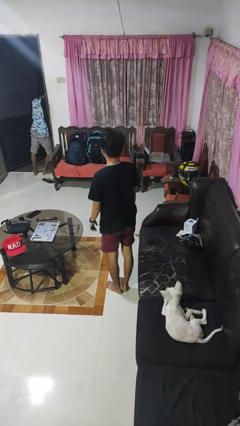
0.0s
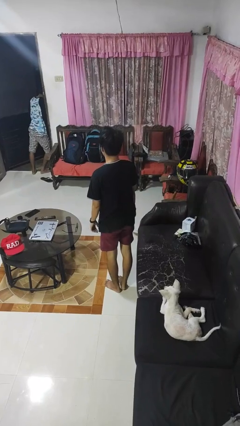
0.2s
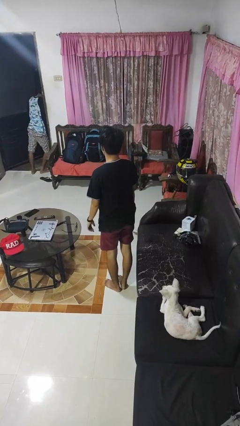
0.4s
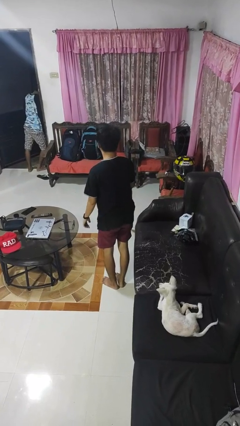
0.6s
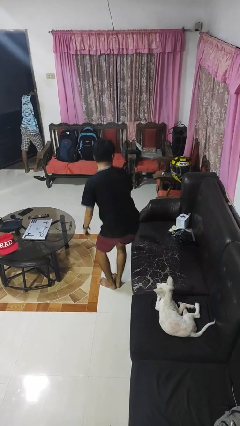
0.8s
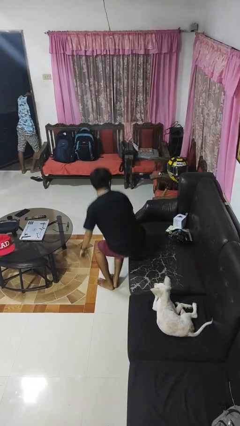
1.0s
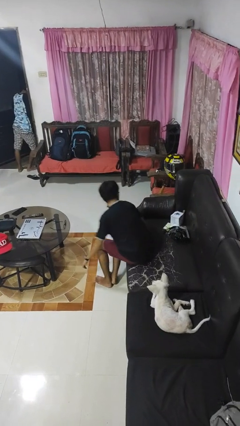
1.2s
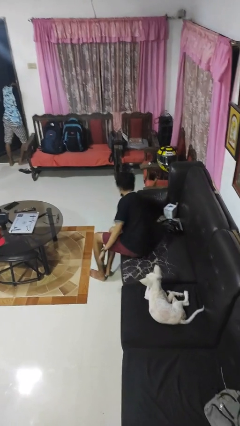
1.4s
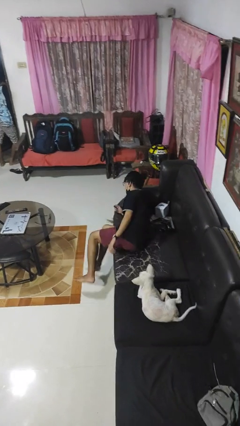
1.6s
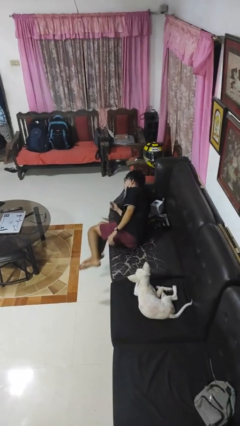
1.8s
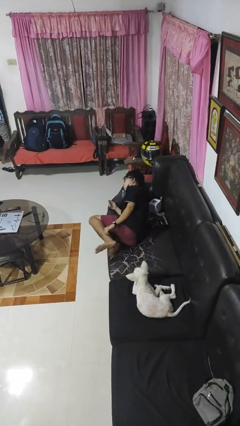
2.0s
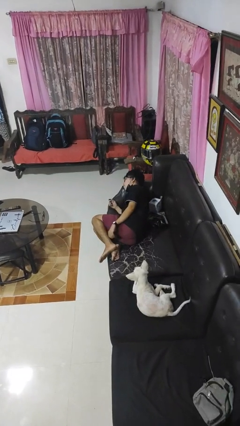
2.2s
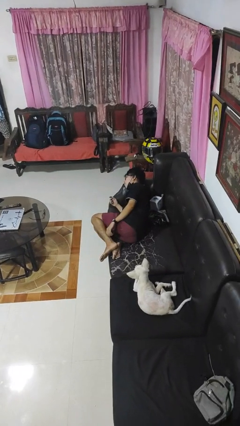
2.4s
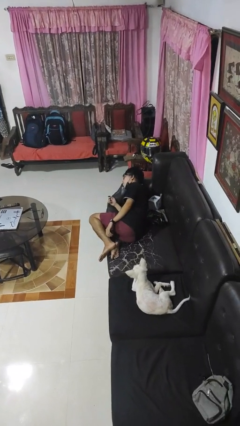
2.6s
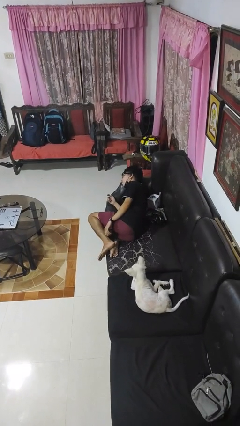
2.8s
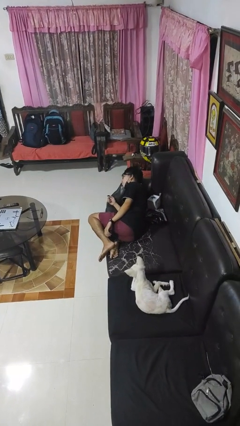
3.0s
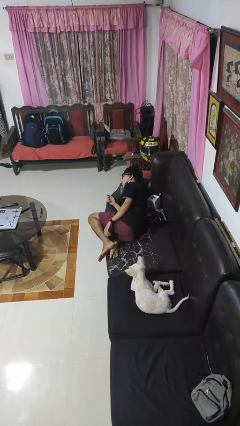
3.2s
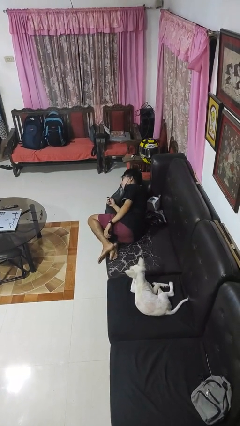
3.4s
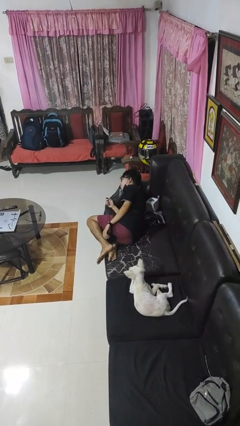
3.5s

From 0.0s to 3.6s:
person lies down on couch

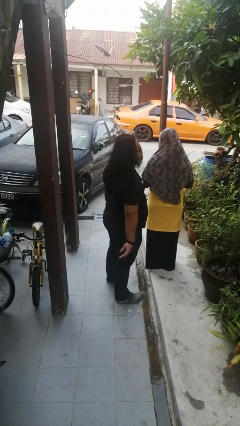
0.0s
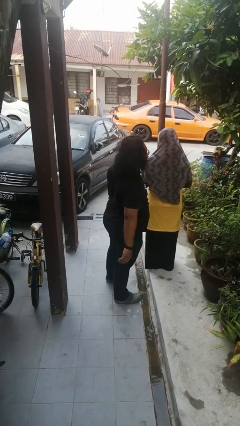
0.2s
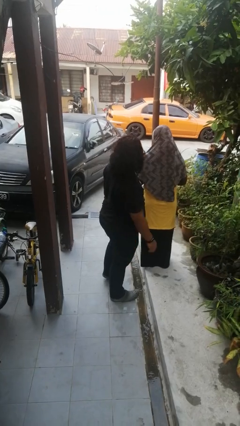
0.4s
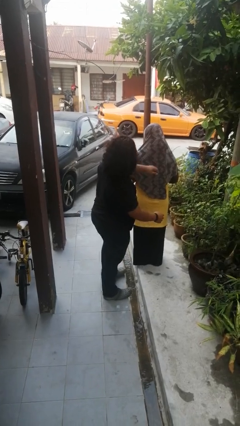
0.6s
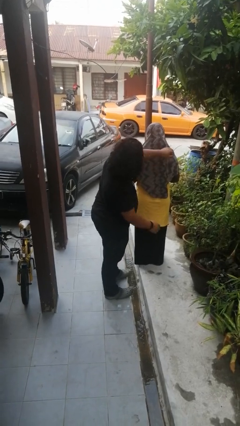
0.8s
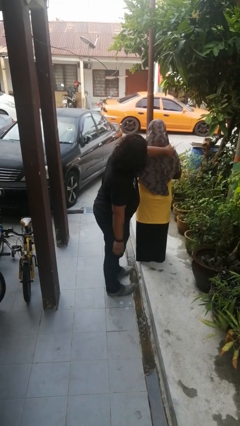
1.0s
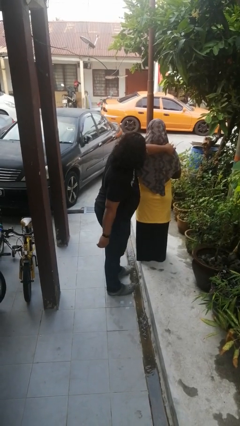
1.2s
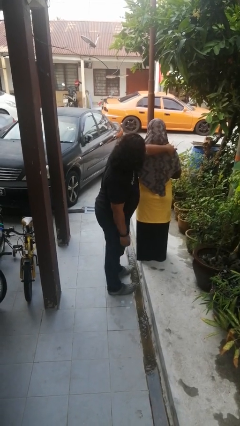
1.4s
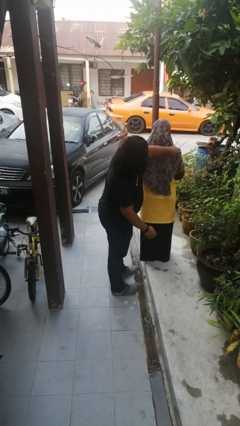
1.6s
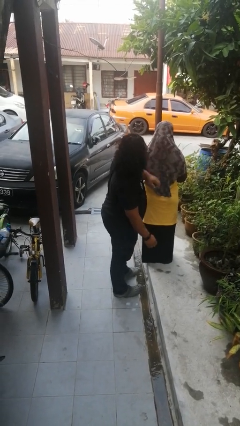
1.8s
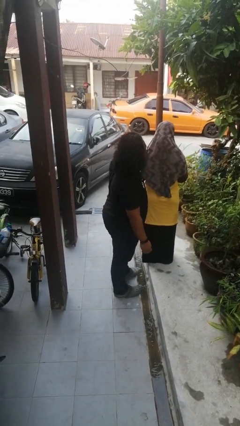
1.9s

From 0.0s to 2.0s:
person touches back of person

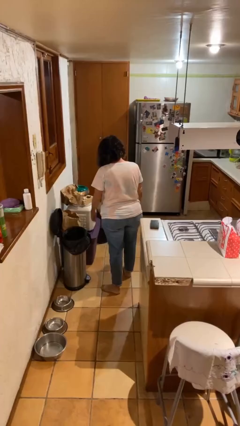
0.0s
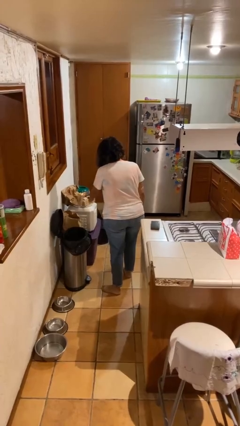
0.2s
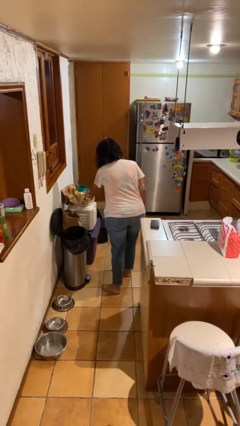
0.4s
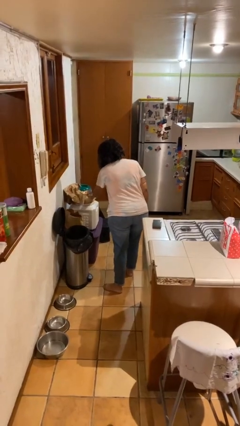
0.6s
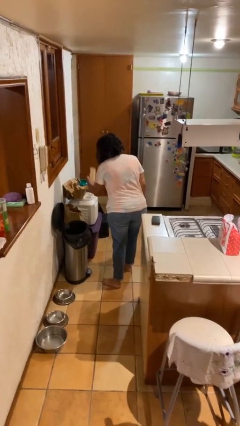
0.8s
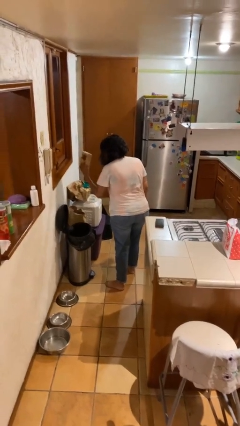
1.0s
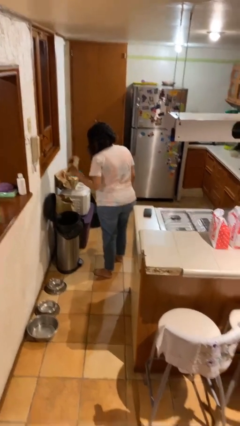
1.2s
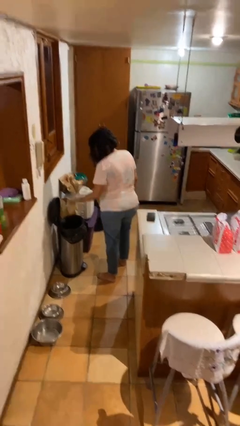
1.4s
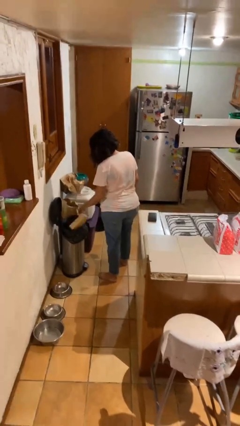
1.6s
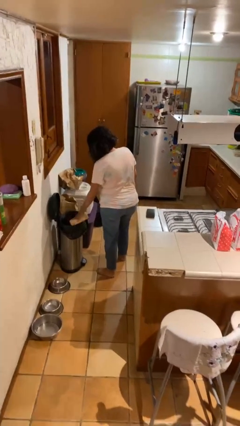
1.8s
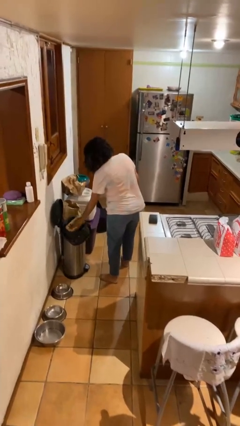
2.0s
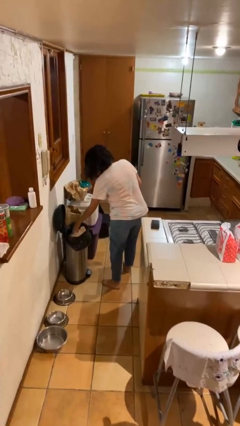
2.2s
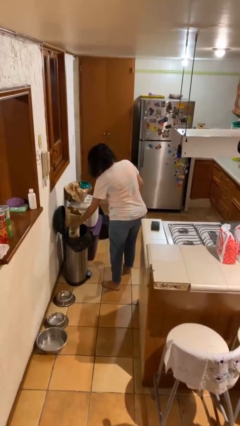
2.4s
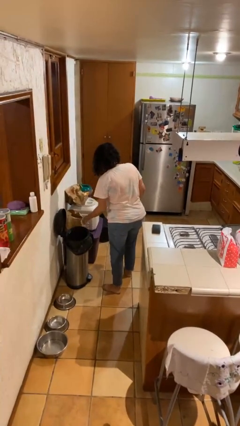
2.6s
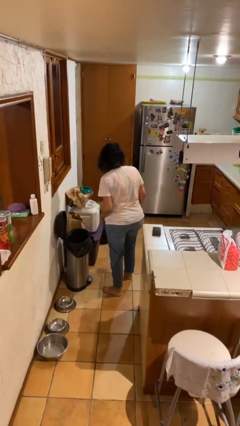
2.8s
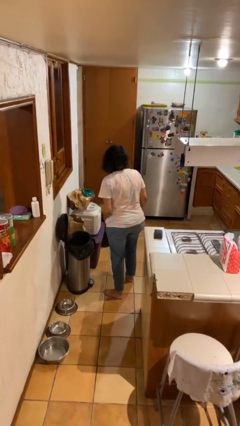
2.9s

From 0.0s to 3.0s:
person discards trash

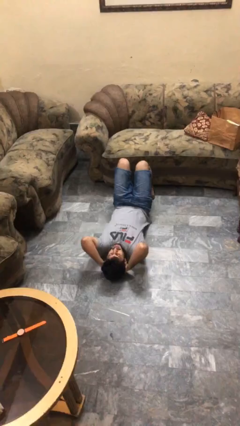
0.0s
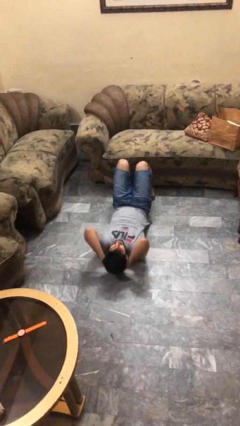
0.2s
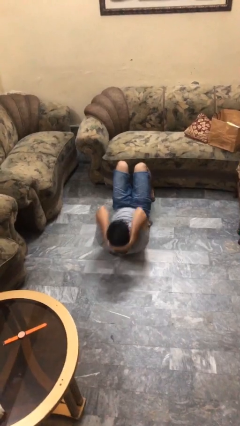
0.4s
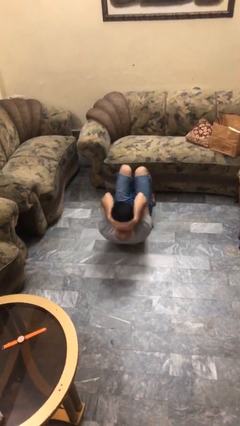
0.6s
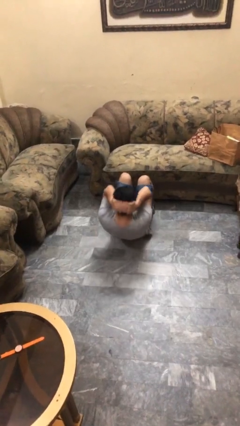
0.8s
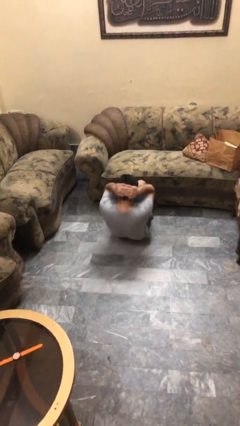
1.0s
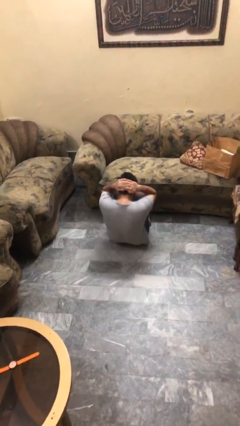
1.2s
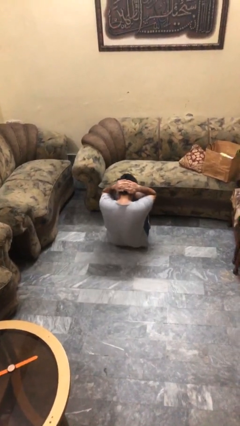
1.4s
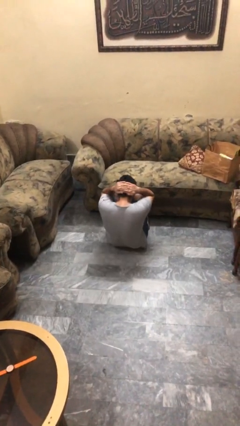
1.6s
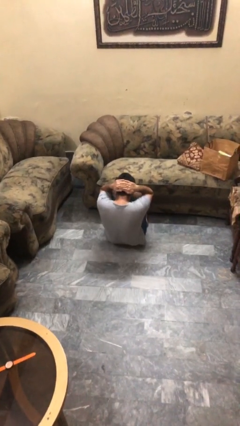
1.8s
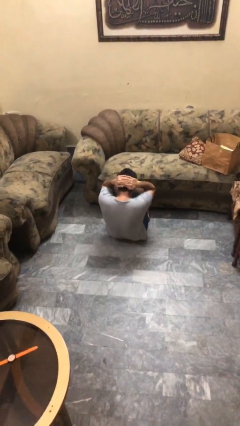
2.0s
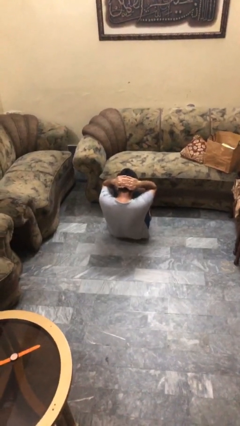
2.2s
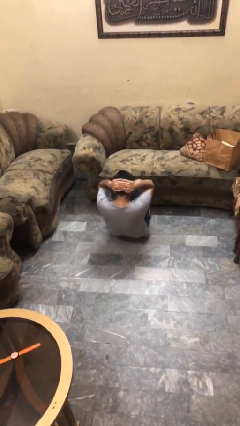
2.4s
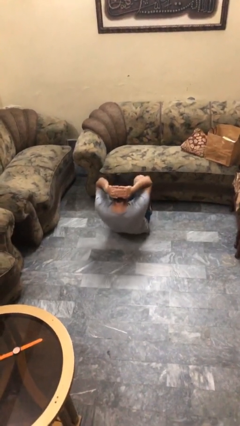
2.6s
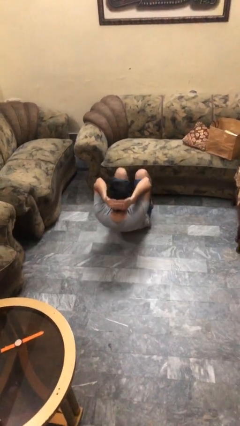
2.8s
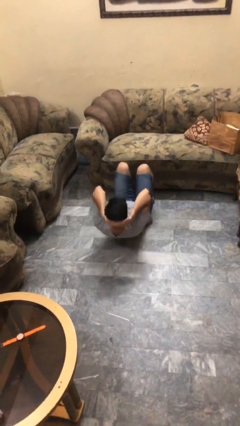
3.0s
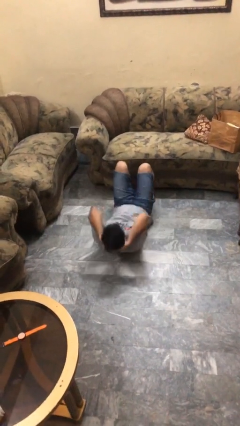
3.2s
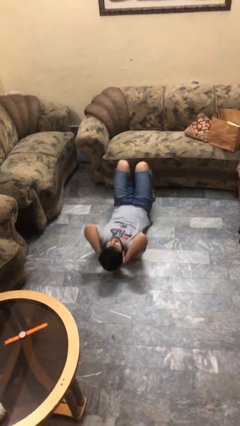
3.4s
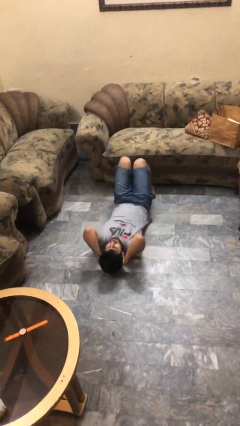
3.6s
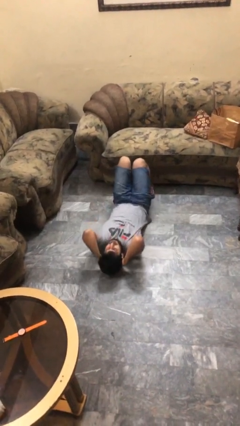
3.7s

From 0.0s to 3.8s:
person exercises with situp

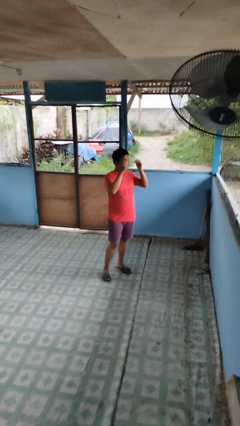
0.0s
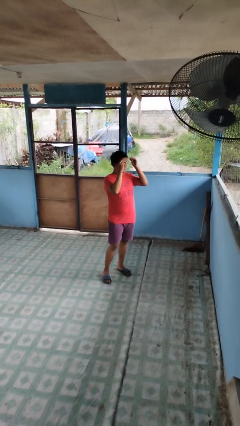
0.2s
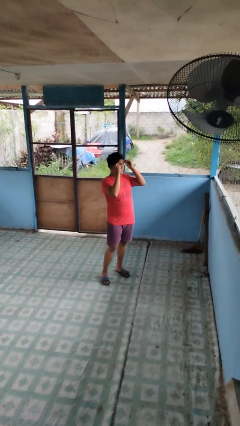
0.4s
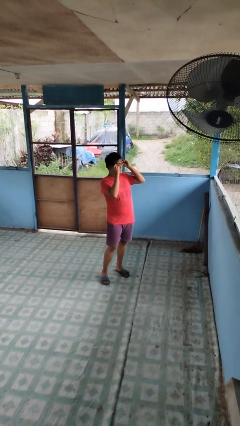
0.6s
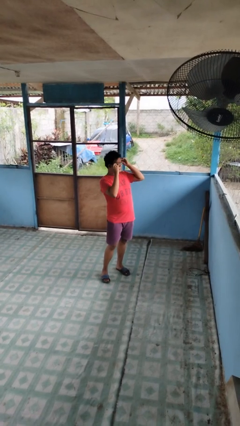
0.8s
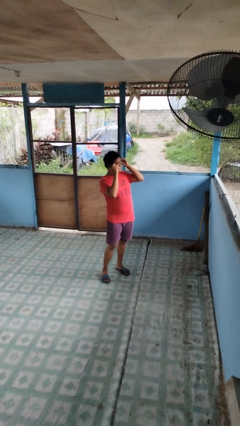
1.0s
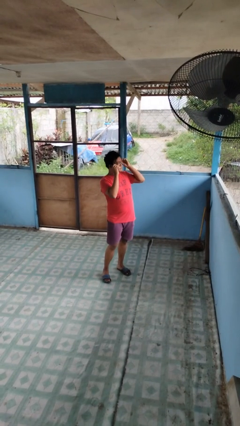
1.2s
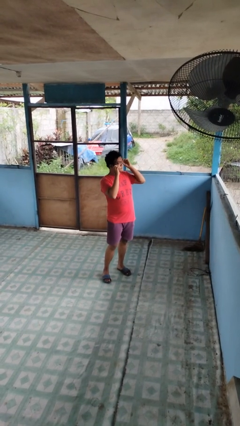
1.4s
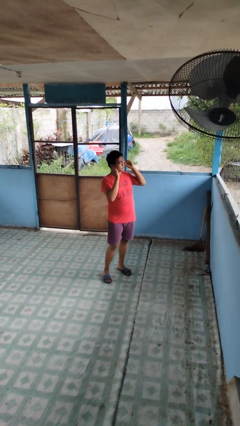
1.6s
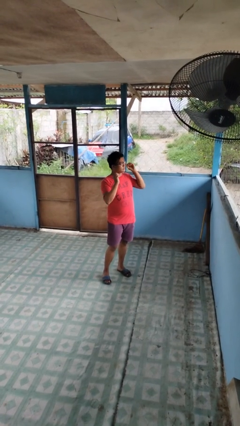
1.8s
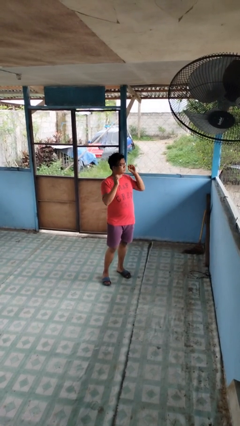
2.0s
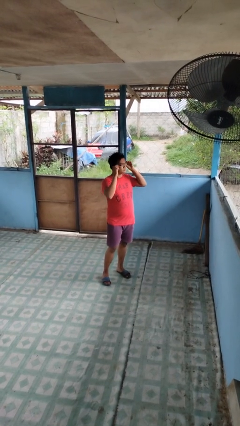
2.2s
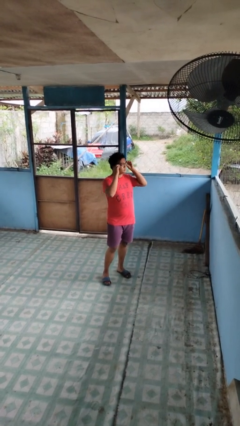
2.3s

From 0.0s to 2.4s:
person puts on glasses

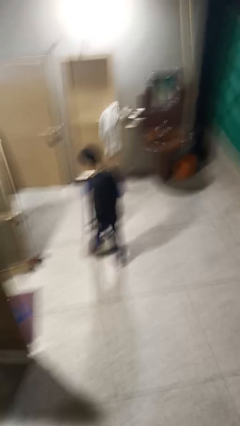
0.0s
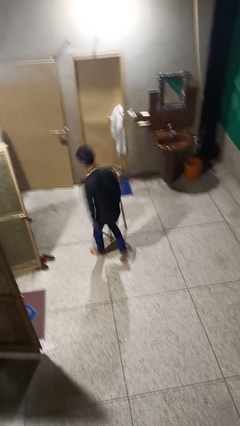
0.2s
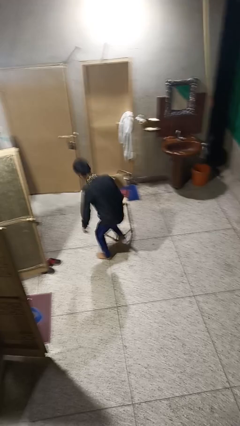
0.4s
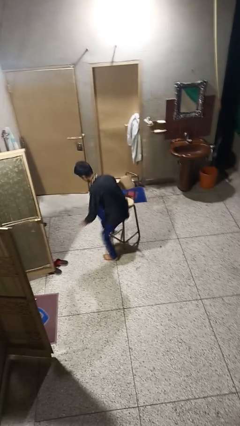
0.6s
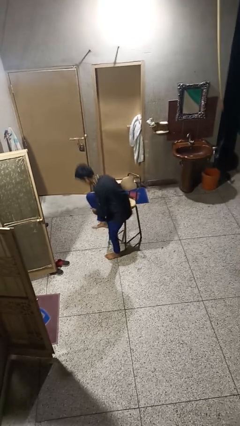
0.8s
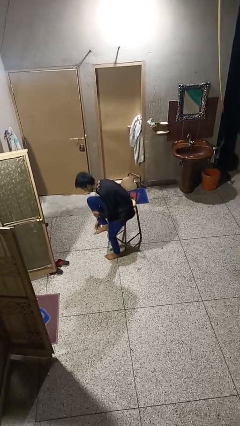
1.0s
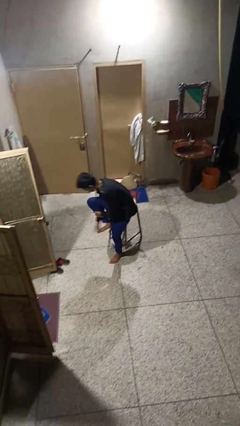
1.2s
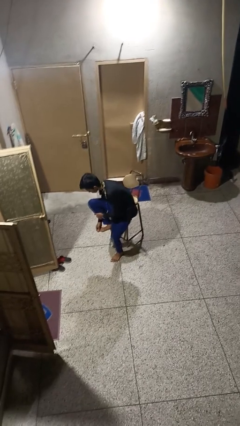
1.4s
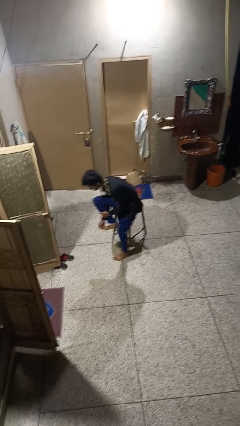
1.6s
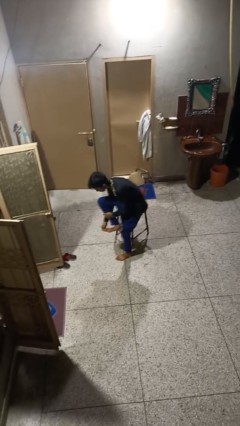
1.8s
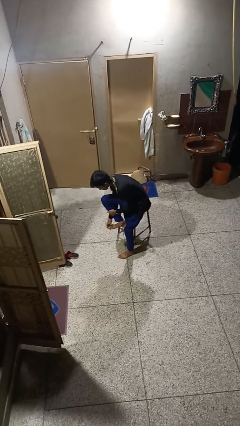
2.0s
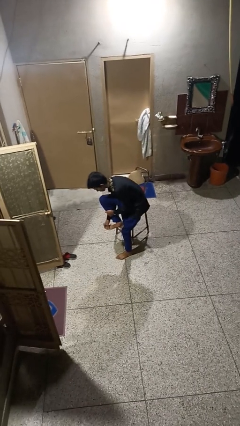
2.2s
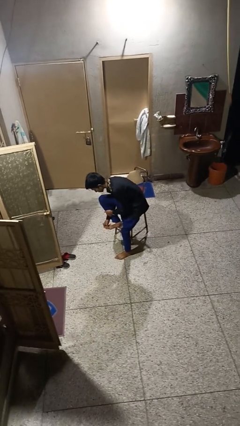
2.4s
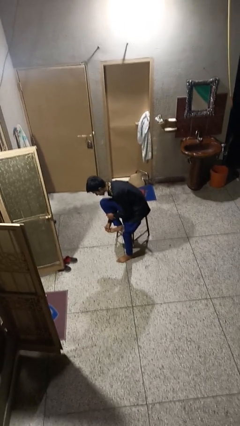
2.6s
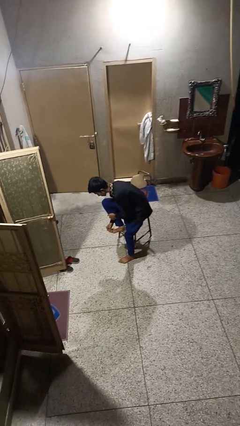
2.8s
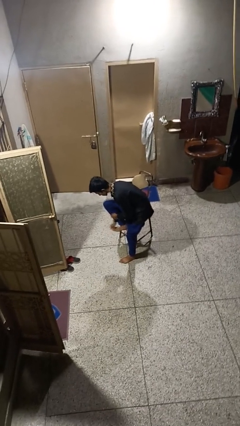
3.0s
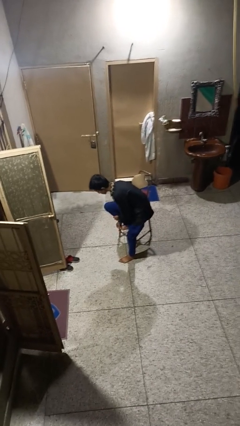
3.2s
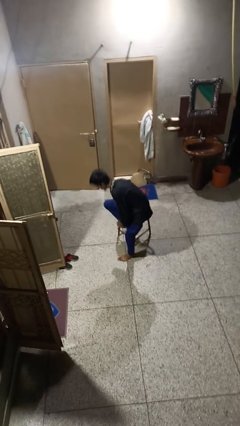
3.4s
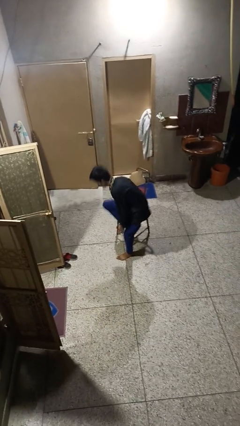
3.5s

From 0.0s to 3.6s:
person stubs toe
